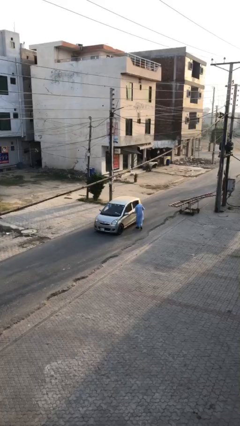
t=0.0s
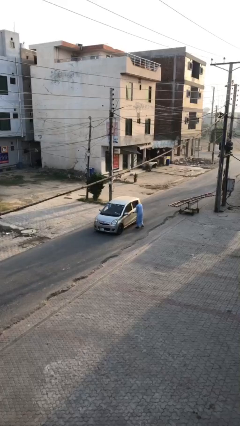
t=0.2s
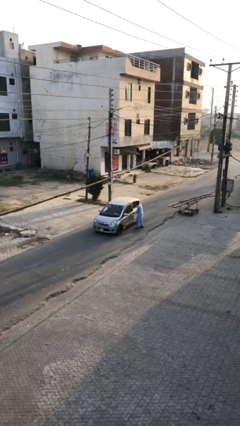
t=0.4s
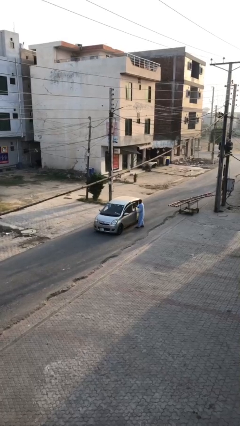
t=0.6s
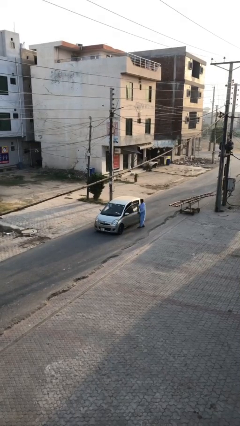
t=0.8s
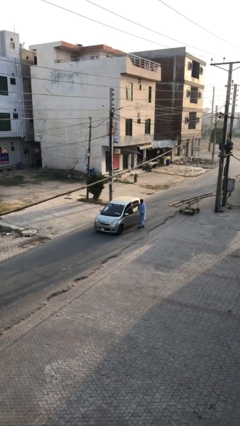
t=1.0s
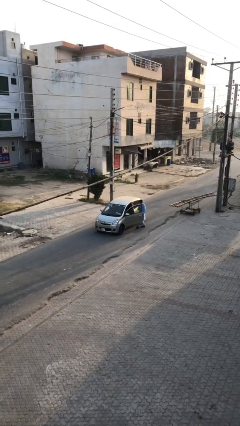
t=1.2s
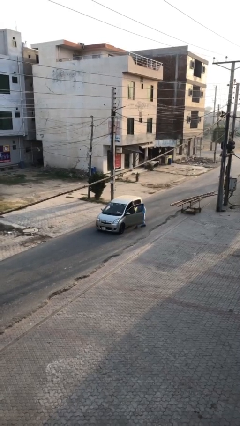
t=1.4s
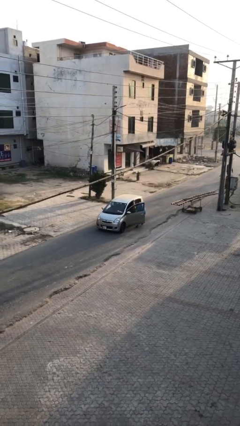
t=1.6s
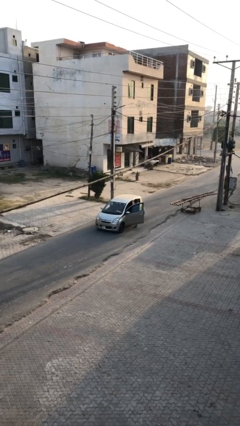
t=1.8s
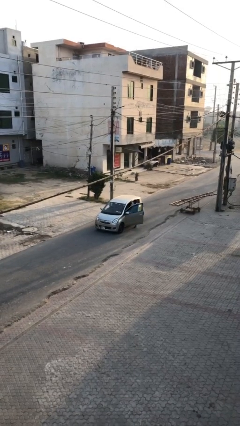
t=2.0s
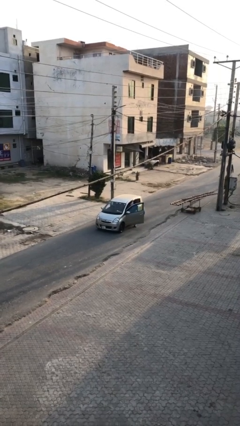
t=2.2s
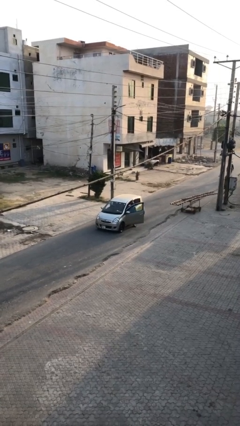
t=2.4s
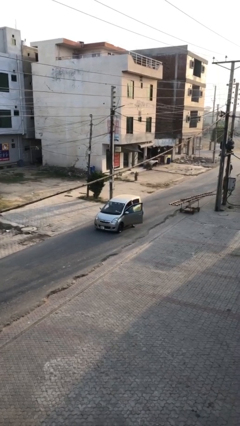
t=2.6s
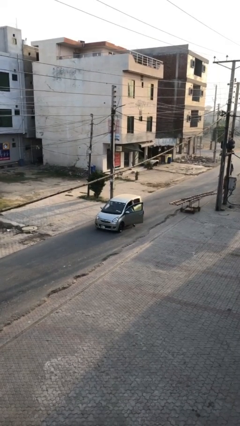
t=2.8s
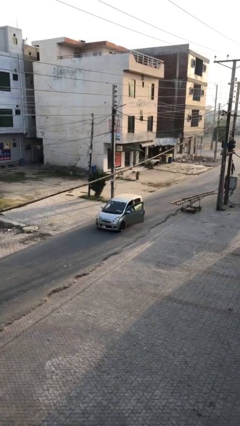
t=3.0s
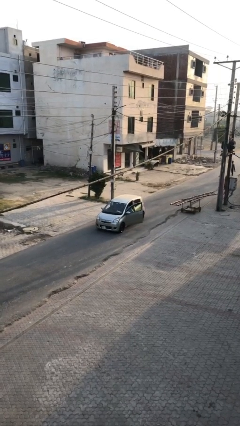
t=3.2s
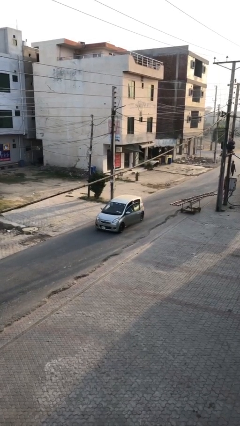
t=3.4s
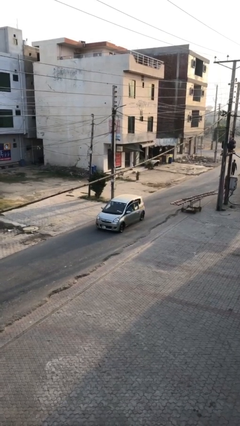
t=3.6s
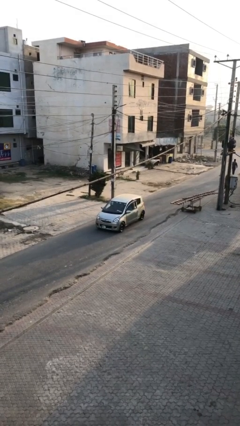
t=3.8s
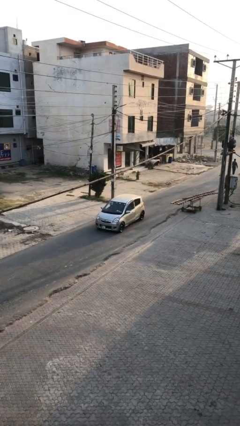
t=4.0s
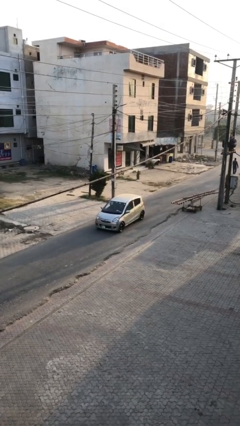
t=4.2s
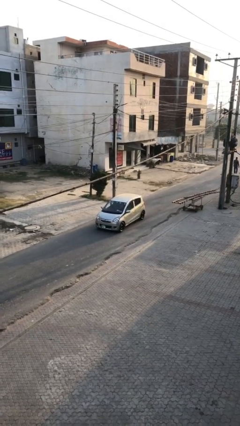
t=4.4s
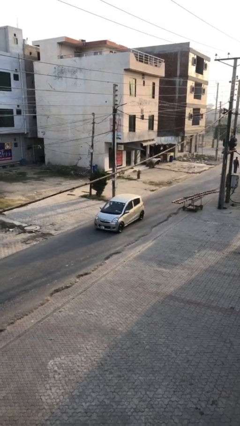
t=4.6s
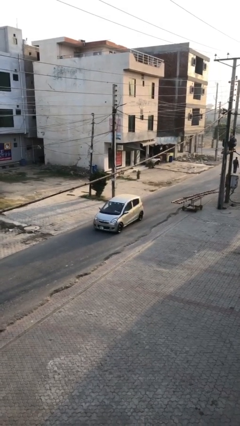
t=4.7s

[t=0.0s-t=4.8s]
car picks up person

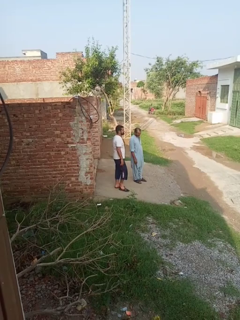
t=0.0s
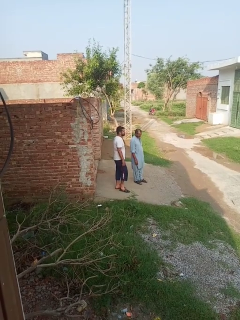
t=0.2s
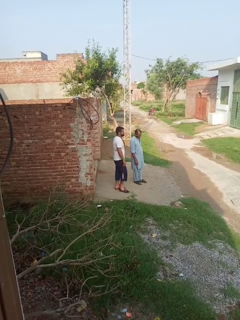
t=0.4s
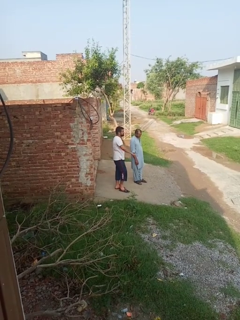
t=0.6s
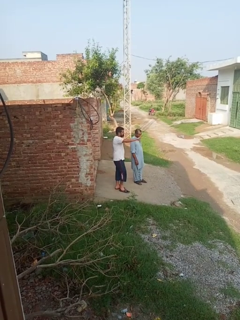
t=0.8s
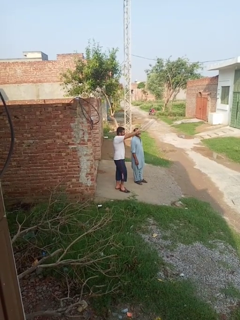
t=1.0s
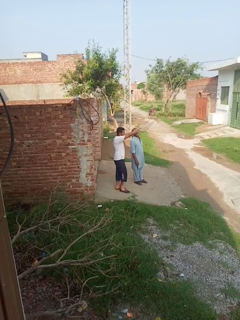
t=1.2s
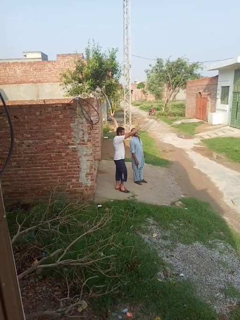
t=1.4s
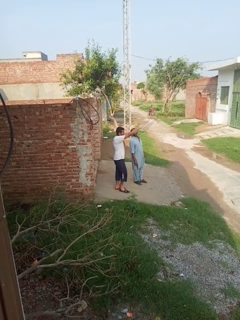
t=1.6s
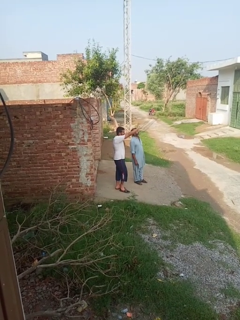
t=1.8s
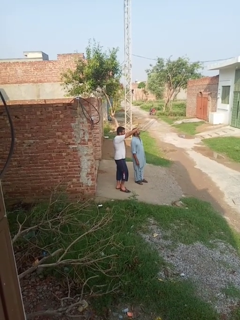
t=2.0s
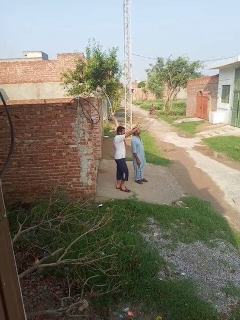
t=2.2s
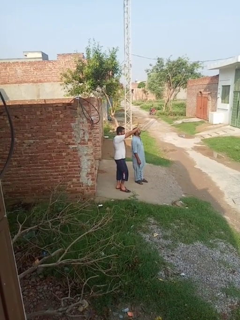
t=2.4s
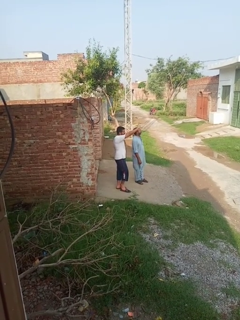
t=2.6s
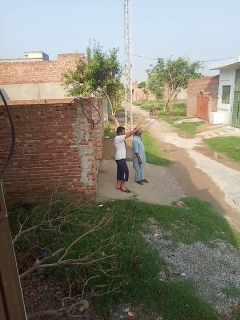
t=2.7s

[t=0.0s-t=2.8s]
person waves at person

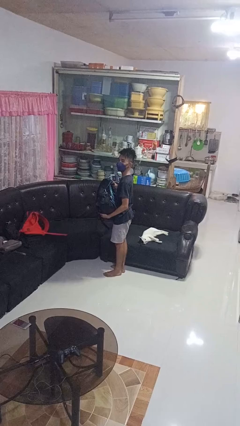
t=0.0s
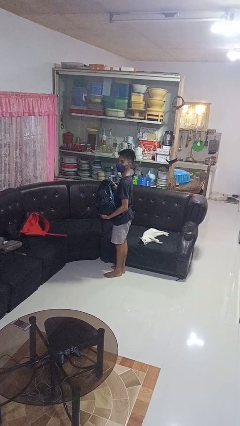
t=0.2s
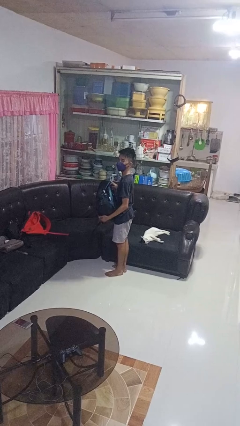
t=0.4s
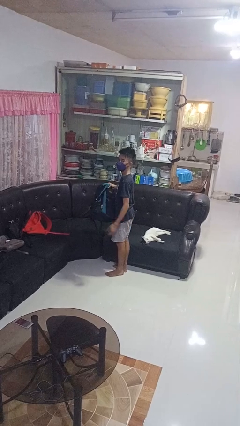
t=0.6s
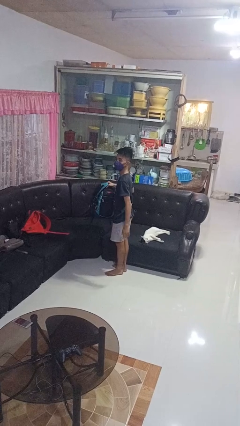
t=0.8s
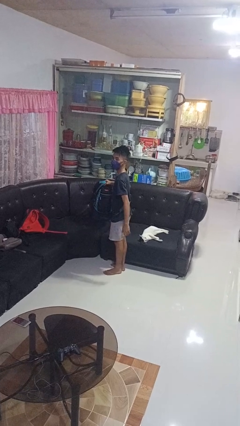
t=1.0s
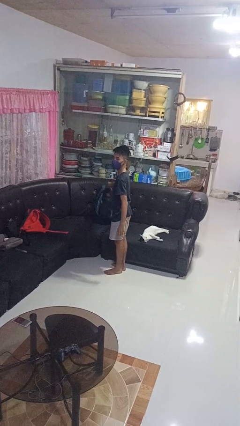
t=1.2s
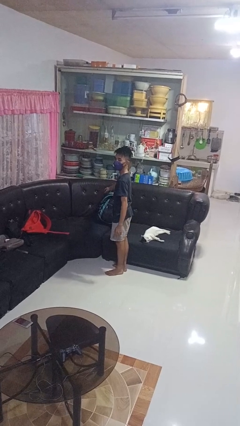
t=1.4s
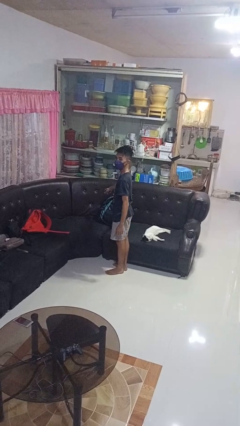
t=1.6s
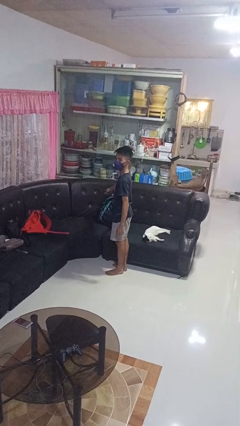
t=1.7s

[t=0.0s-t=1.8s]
person puts down object on couch

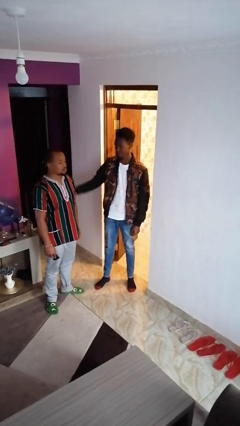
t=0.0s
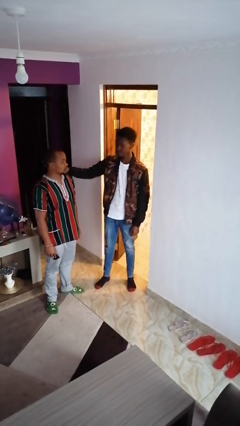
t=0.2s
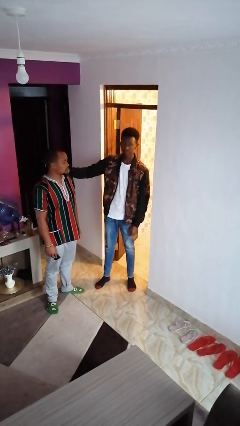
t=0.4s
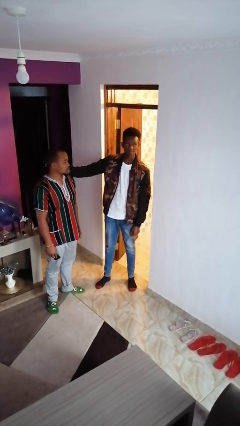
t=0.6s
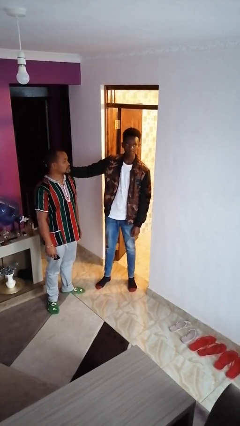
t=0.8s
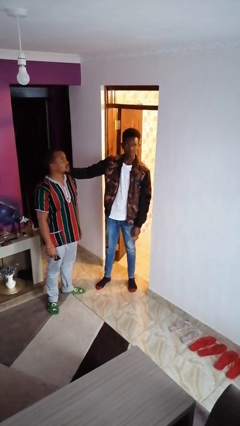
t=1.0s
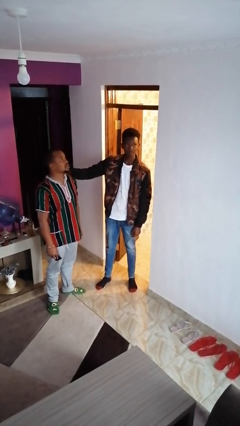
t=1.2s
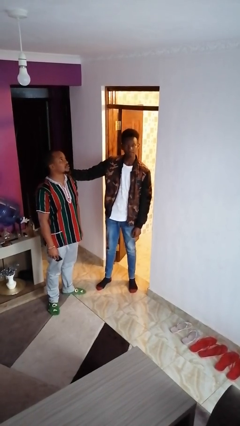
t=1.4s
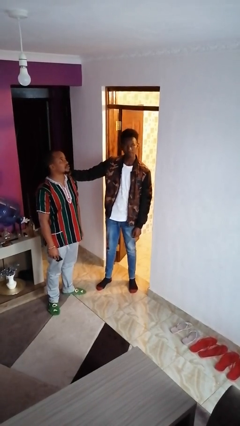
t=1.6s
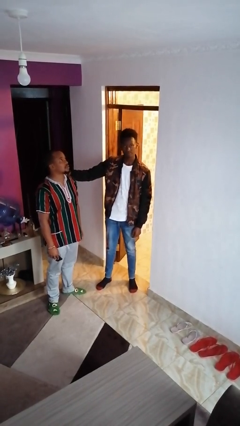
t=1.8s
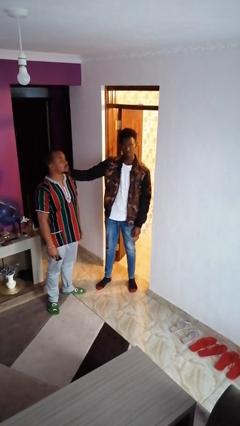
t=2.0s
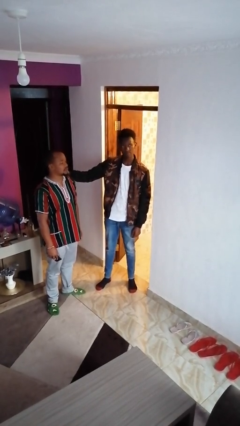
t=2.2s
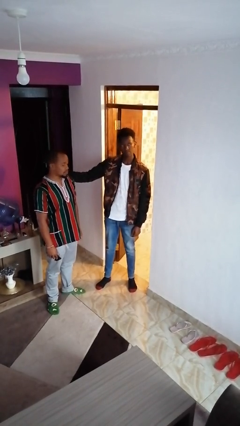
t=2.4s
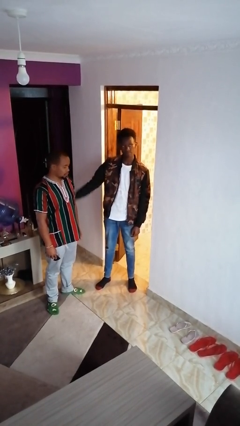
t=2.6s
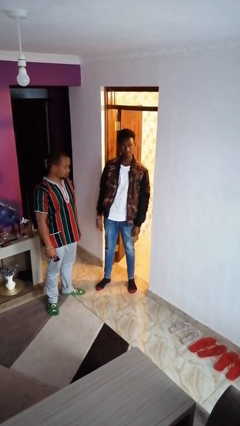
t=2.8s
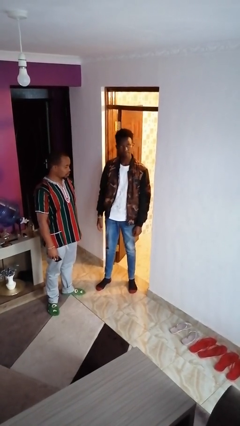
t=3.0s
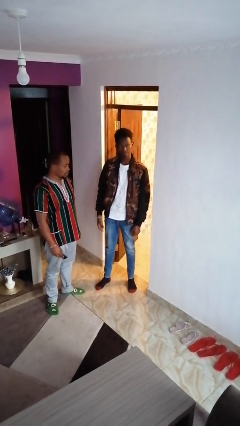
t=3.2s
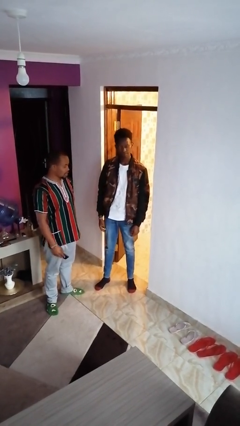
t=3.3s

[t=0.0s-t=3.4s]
person pounds shoulders of person

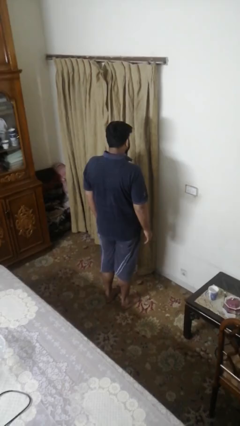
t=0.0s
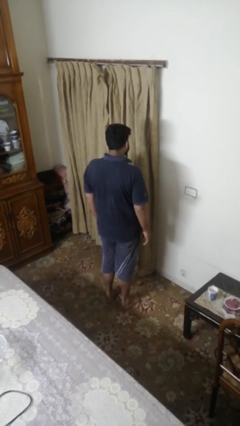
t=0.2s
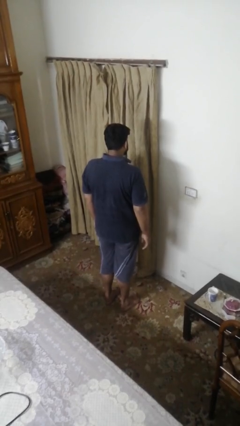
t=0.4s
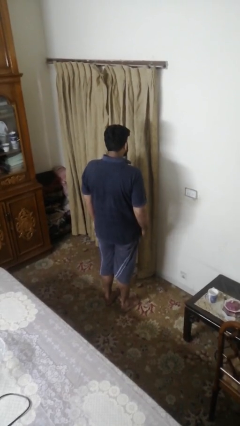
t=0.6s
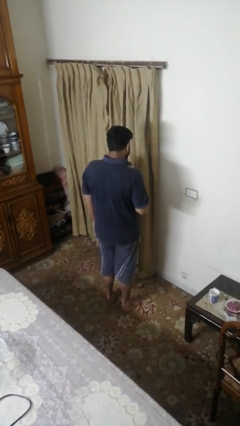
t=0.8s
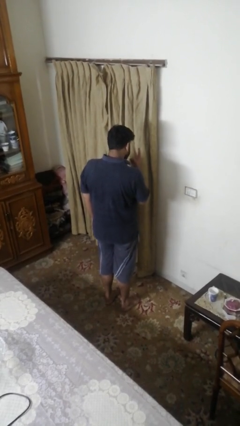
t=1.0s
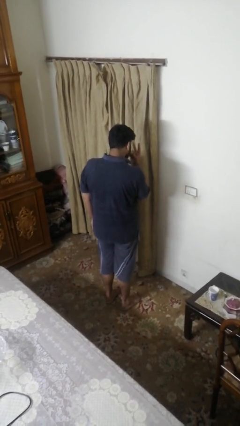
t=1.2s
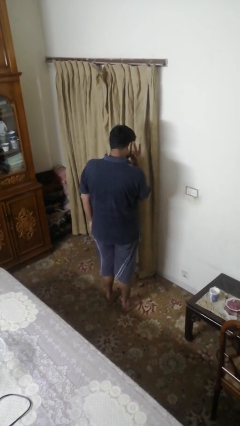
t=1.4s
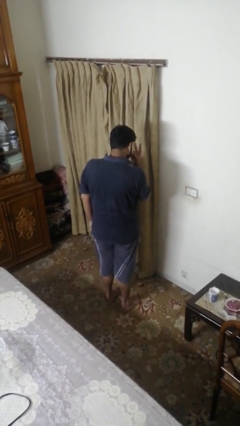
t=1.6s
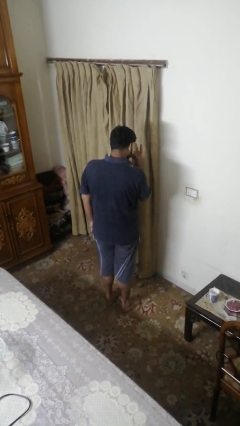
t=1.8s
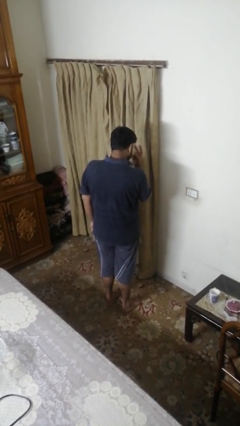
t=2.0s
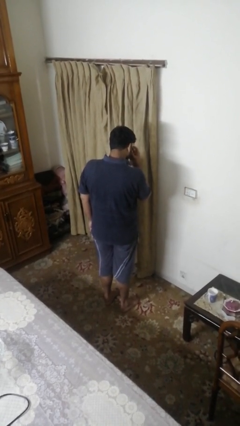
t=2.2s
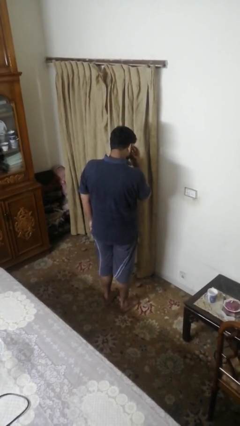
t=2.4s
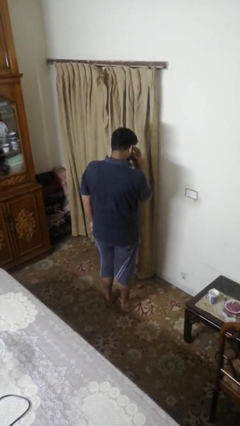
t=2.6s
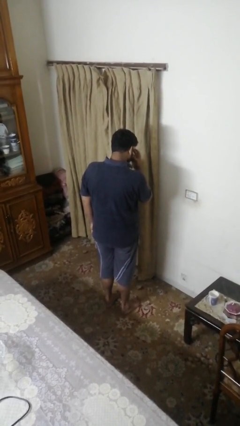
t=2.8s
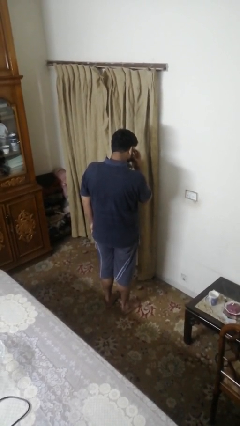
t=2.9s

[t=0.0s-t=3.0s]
person gestures watch closely

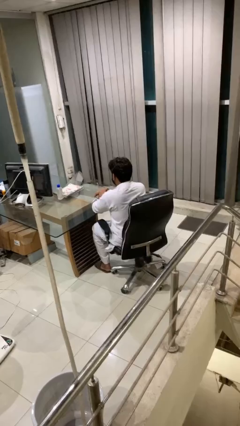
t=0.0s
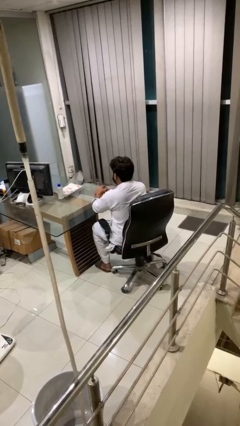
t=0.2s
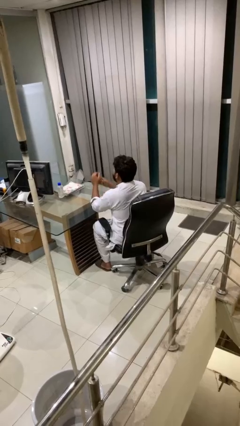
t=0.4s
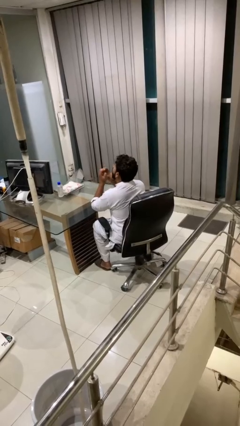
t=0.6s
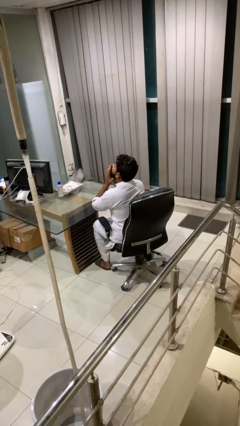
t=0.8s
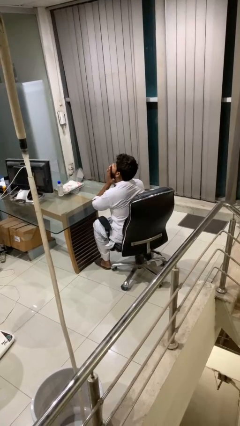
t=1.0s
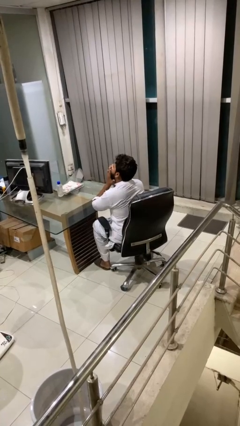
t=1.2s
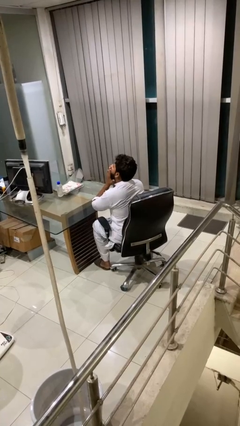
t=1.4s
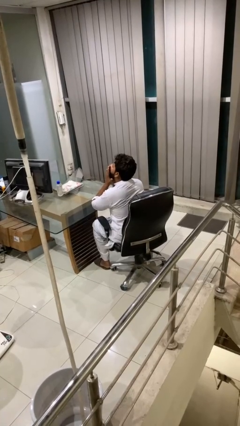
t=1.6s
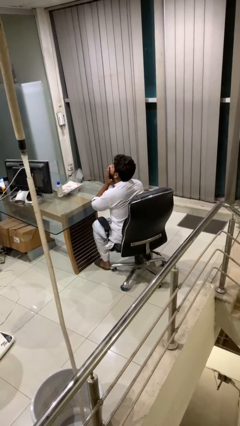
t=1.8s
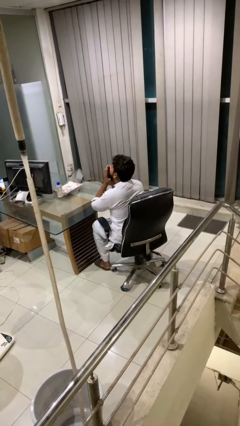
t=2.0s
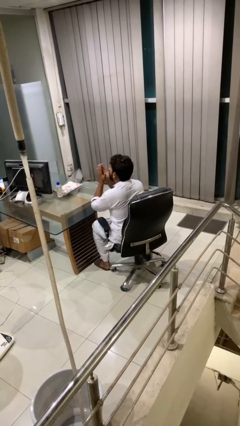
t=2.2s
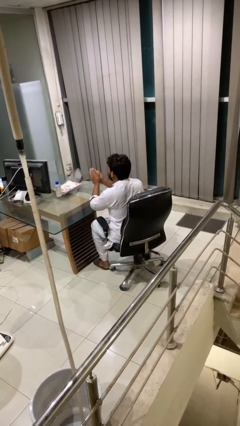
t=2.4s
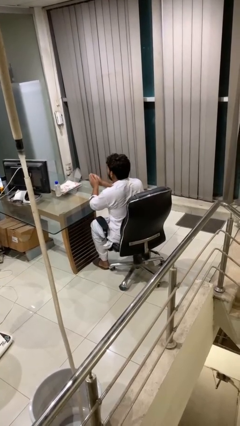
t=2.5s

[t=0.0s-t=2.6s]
person yawns
